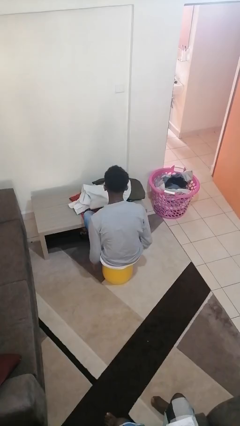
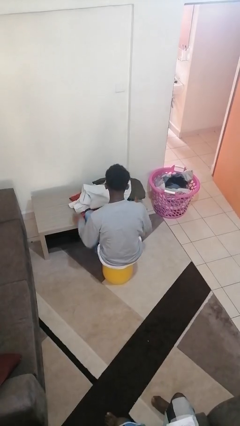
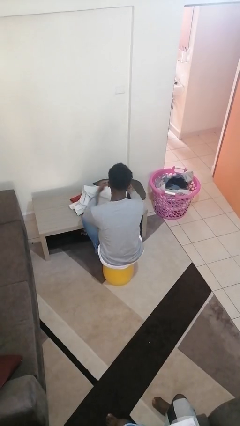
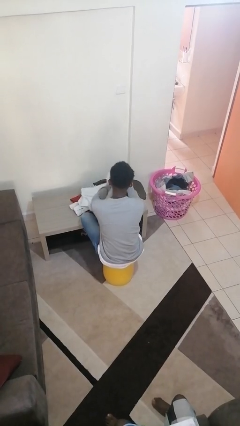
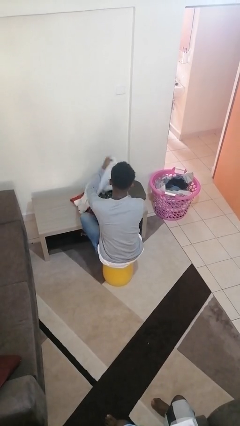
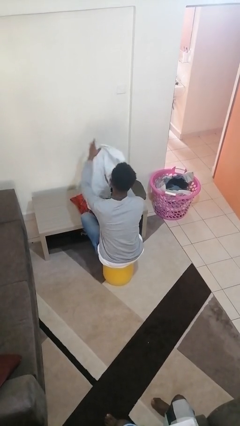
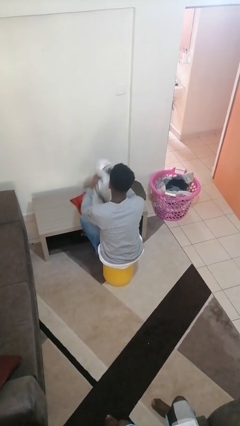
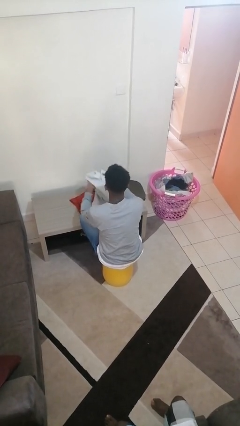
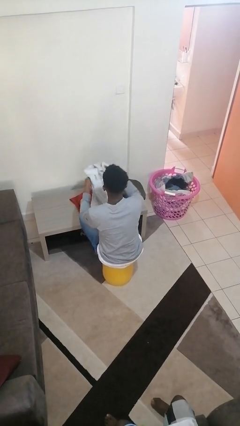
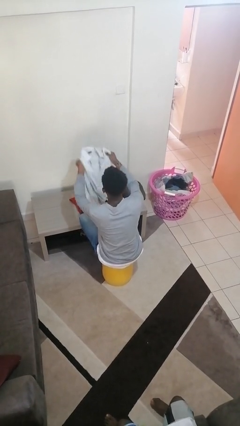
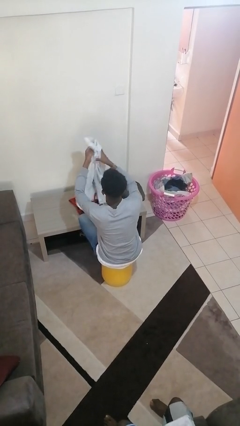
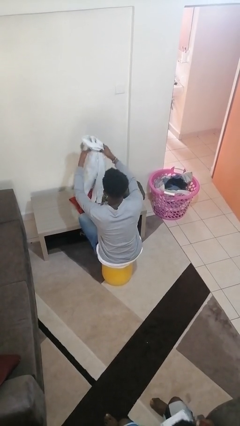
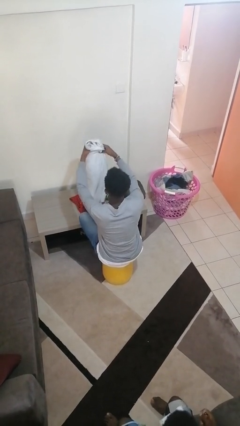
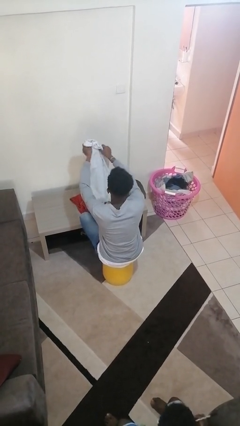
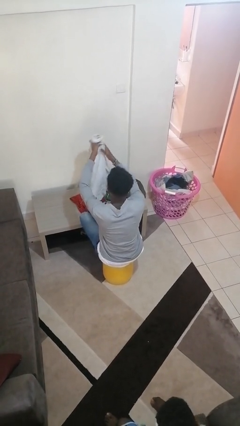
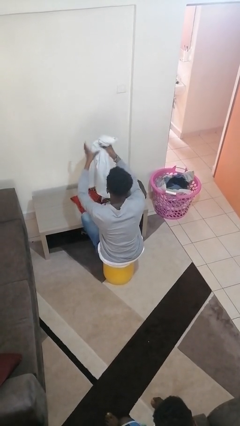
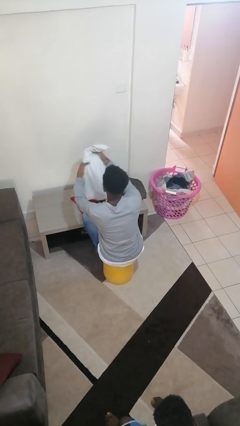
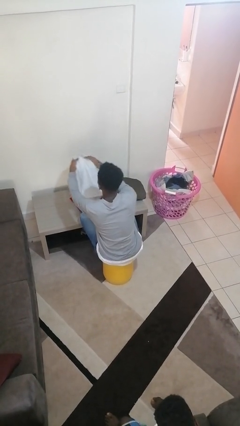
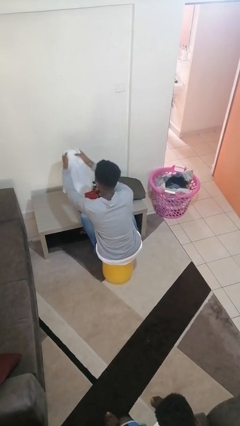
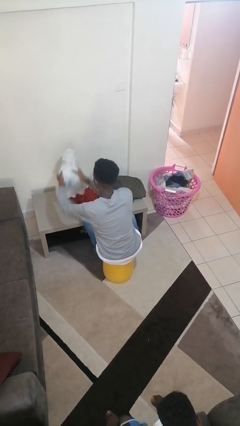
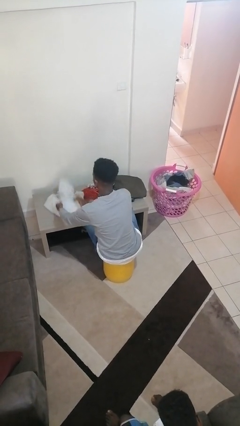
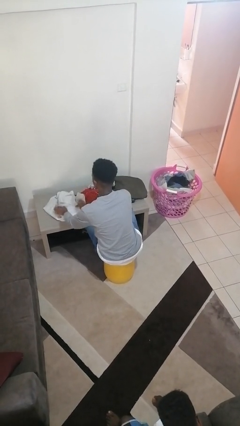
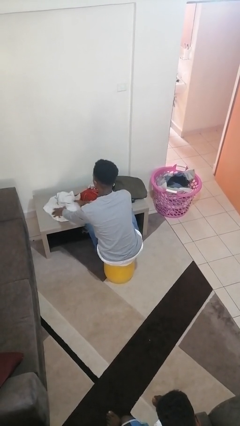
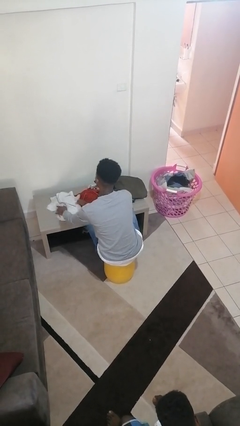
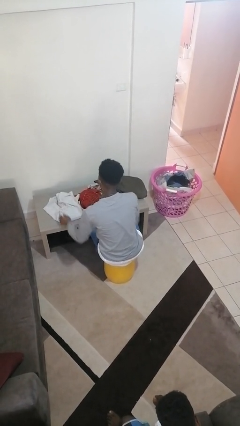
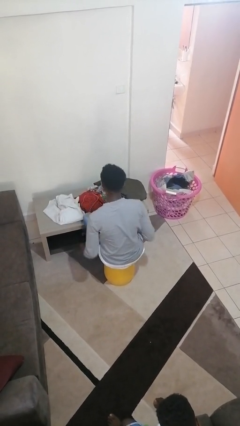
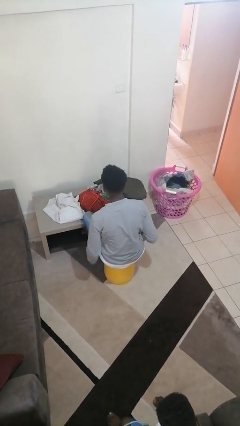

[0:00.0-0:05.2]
person folds shirt

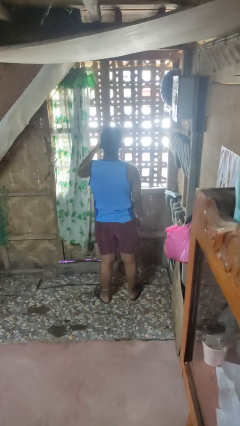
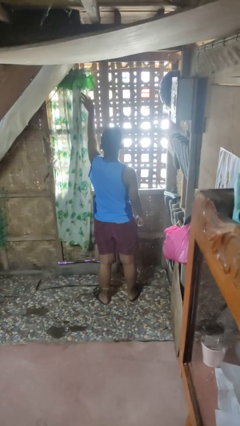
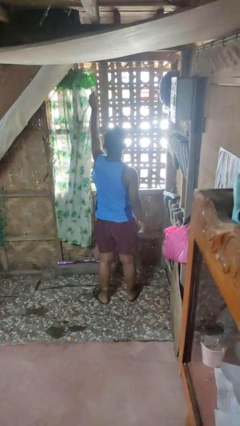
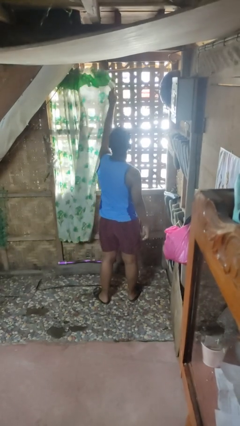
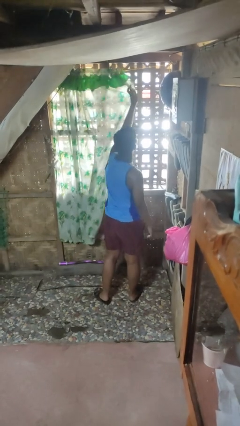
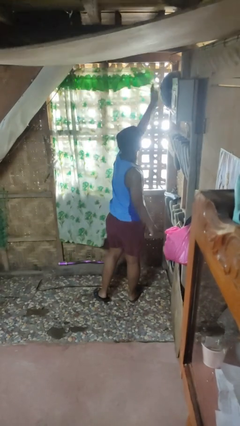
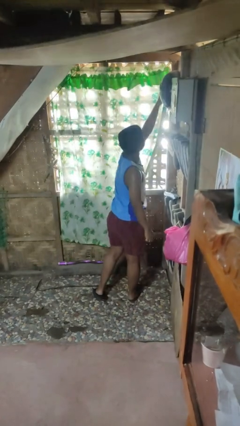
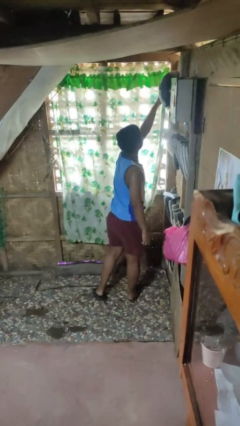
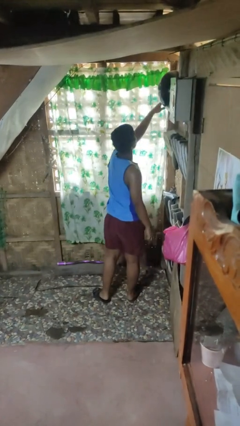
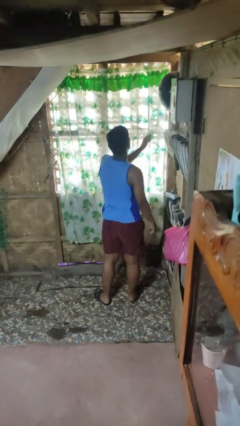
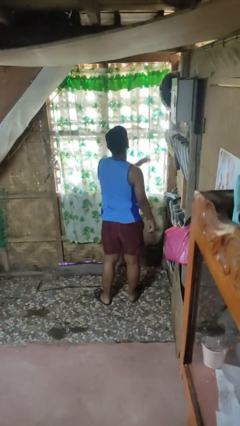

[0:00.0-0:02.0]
person closes curtains

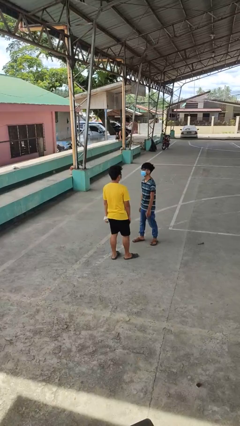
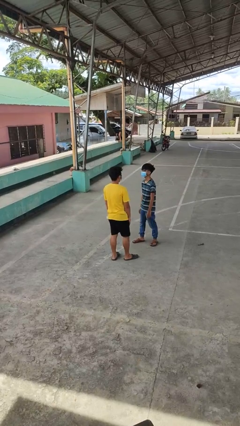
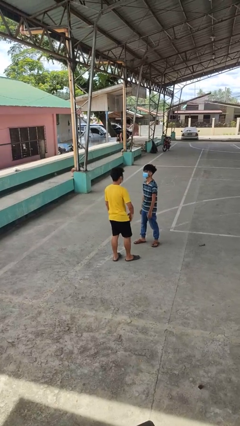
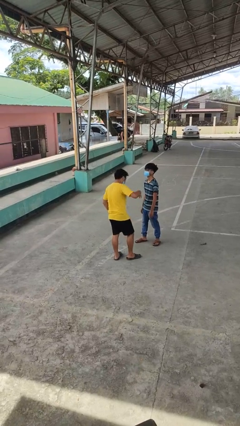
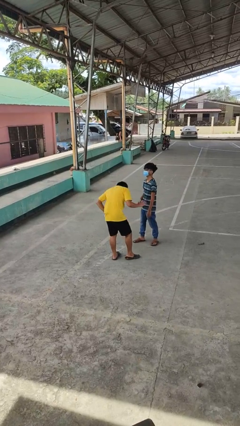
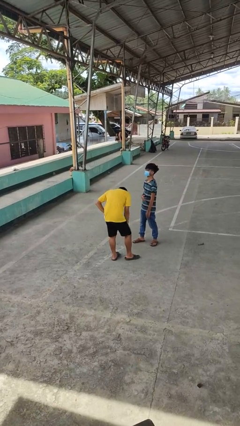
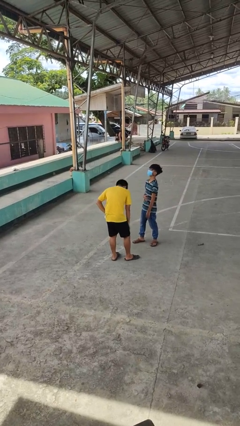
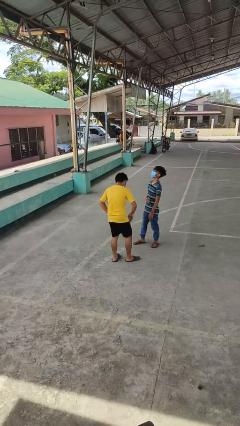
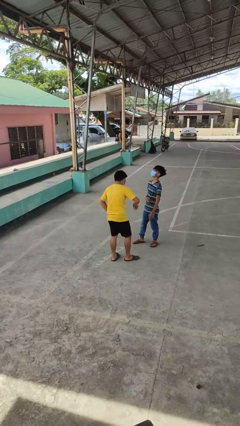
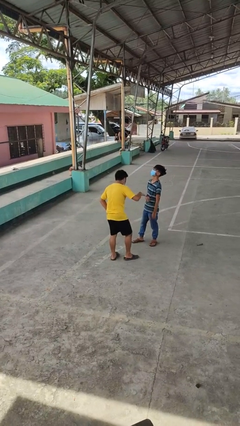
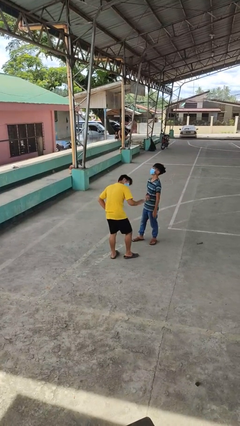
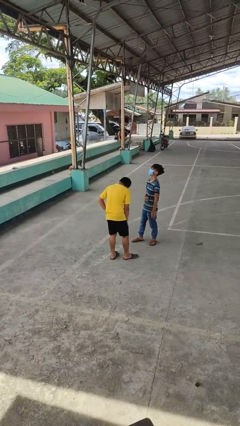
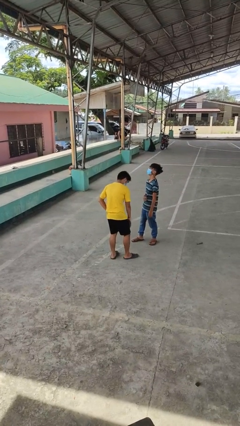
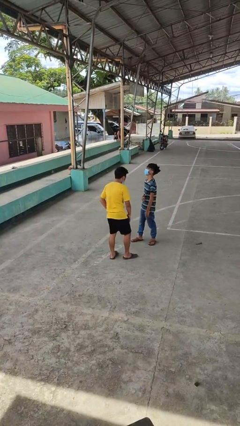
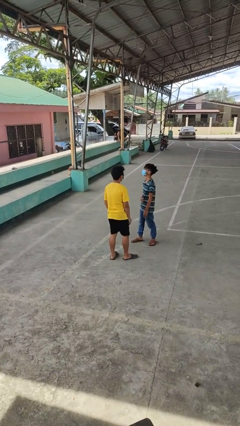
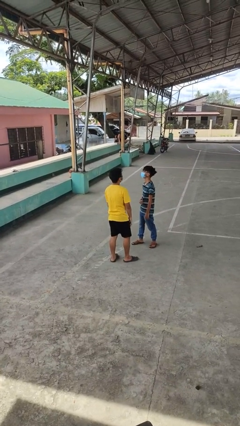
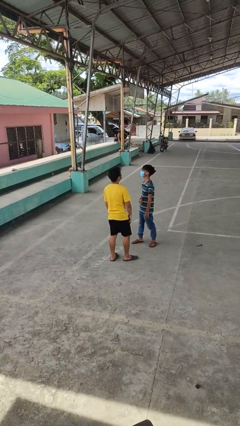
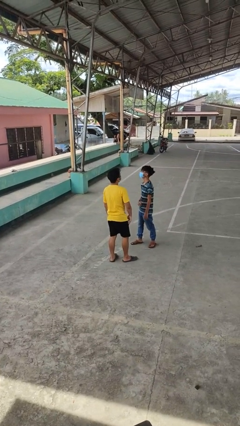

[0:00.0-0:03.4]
person laughs with person

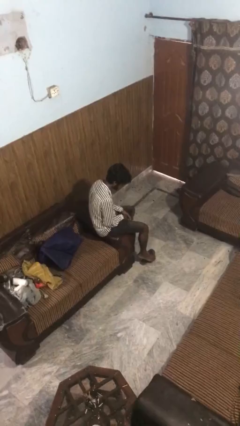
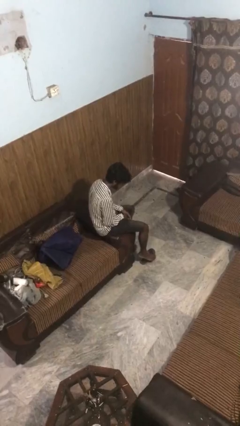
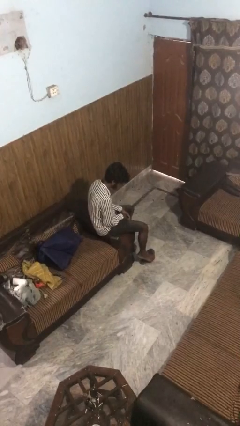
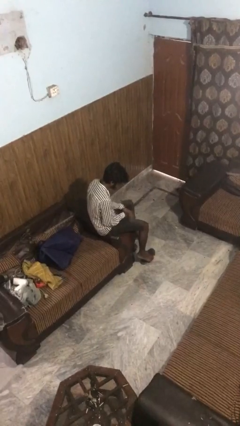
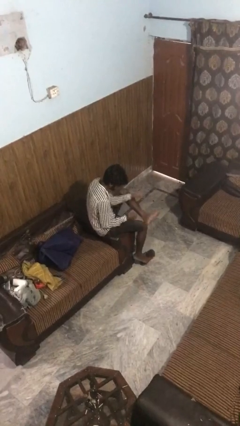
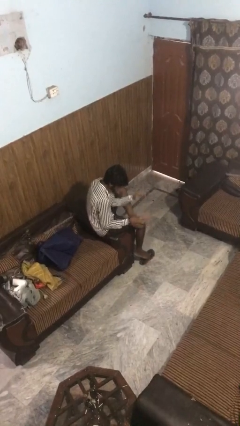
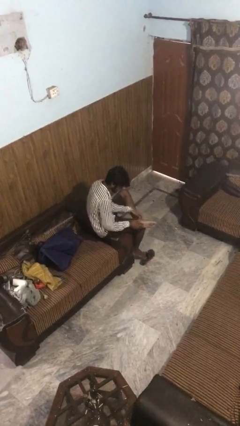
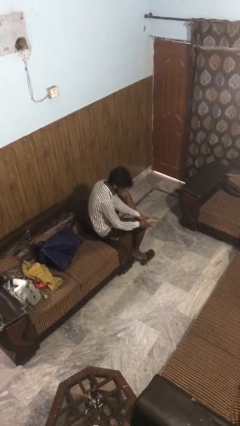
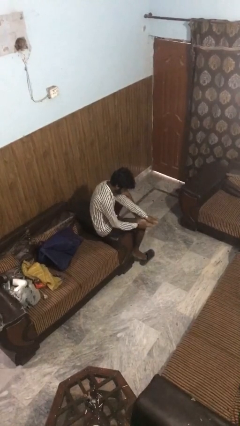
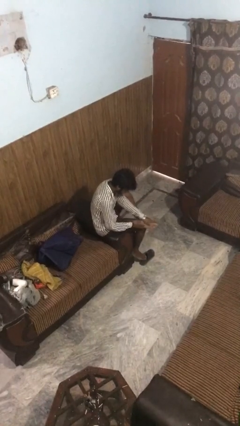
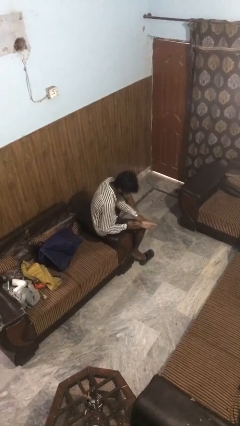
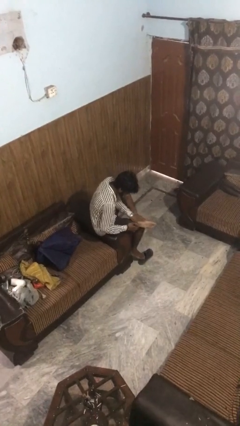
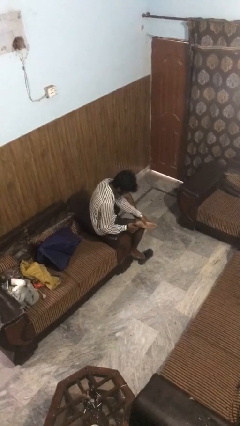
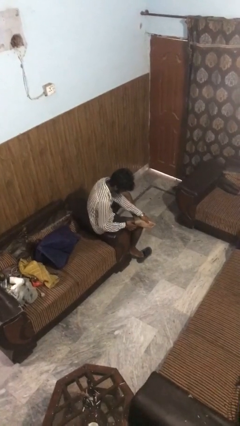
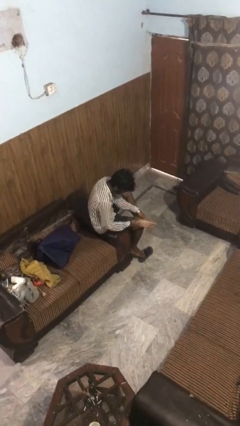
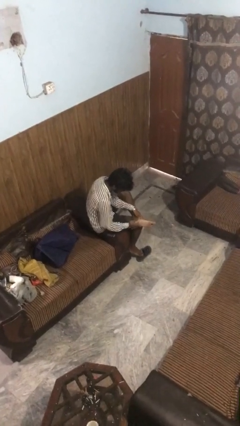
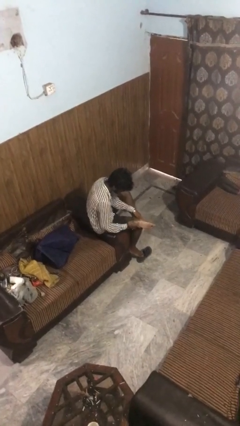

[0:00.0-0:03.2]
person rubs foot

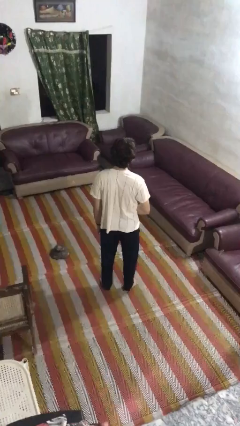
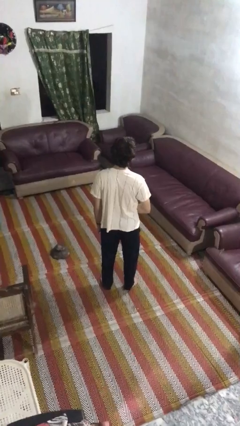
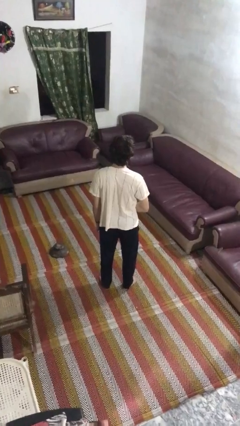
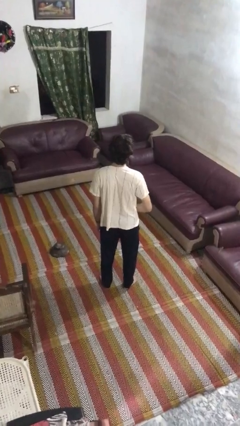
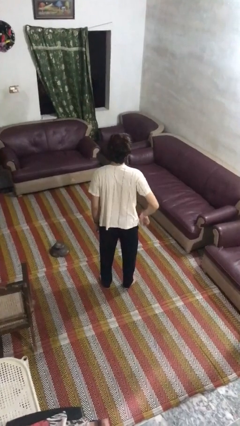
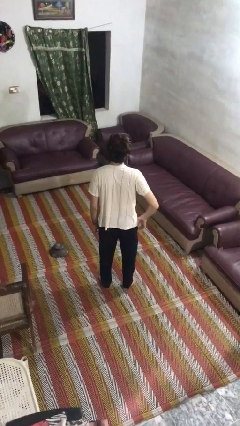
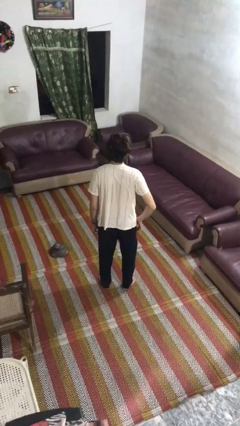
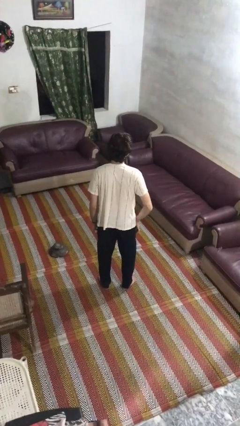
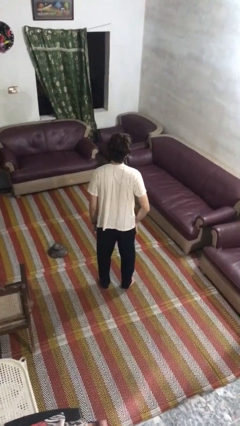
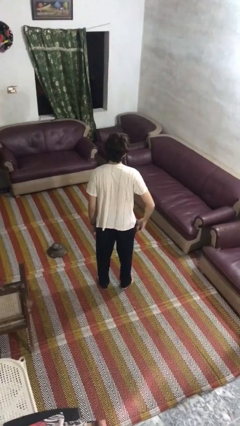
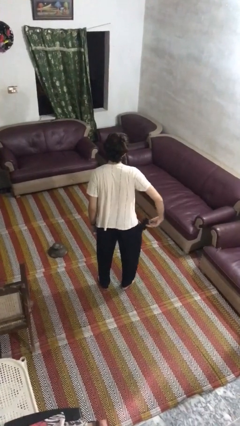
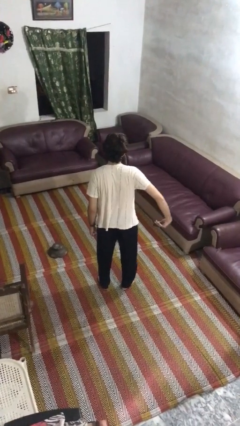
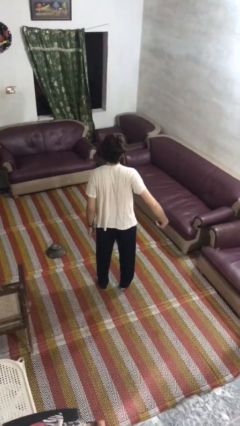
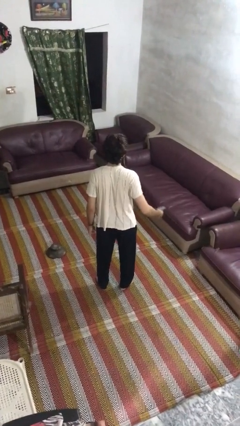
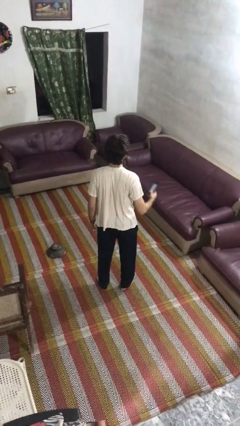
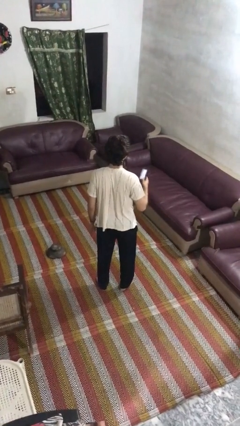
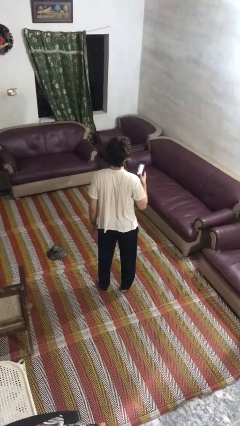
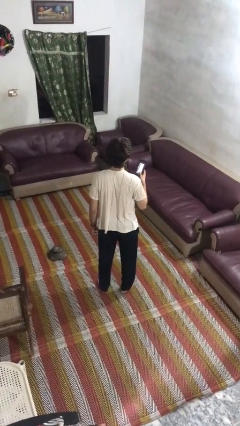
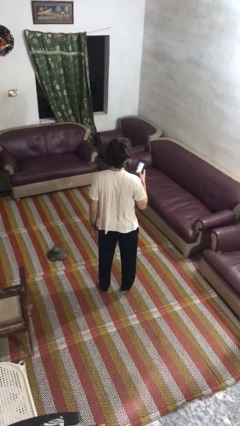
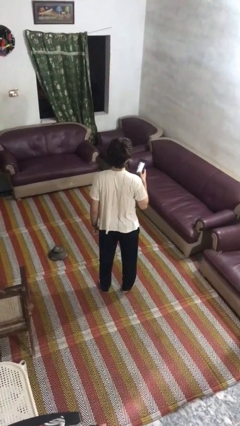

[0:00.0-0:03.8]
person takes phone from pocket
